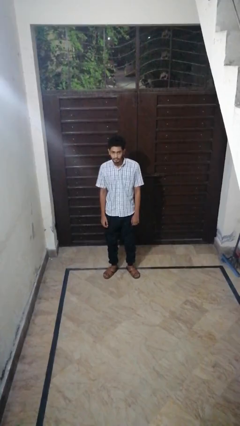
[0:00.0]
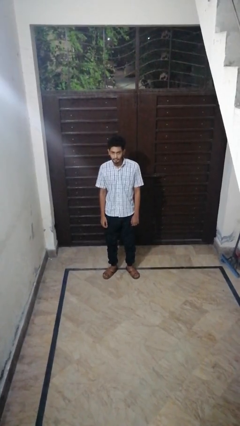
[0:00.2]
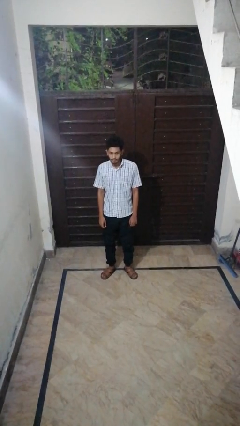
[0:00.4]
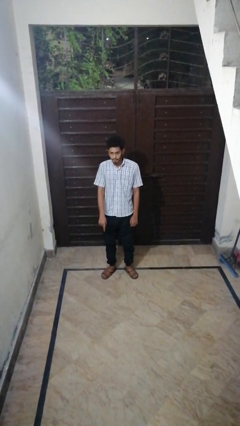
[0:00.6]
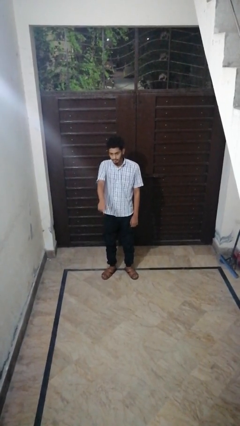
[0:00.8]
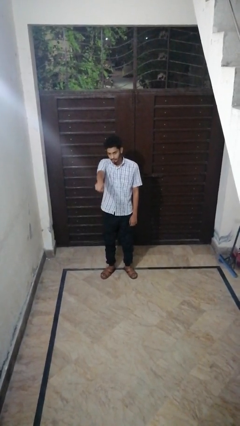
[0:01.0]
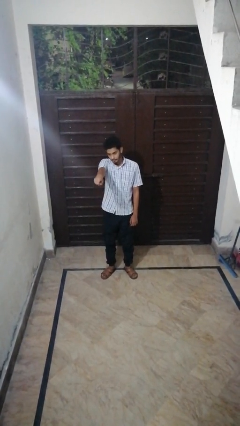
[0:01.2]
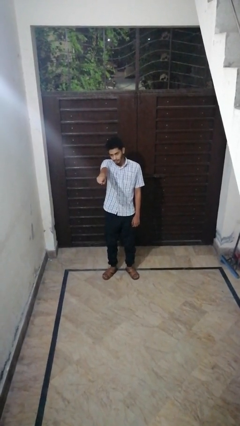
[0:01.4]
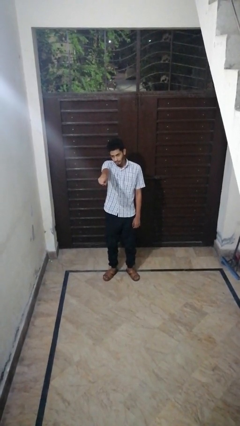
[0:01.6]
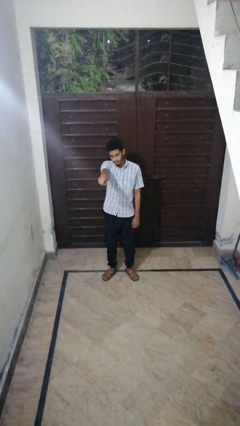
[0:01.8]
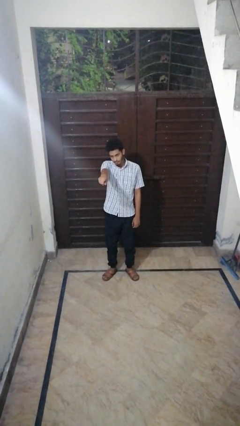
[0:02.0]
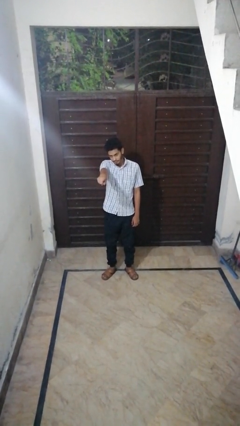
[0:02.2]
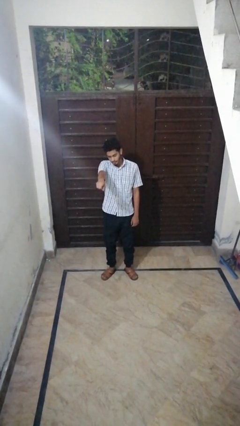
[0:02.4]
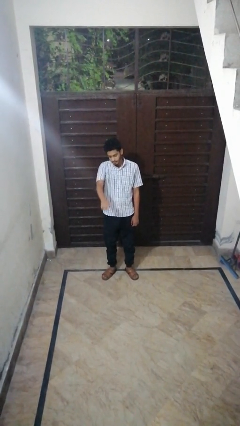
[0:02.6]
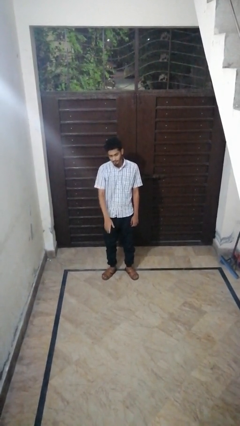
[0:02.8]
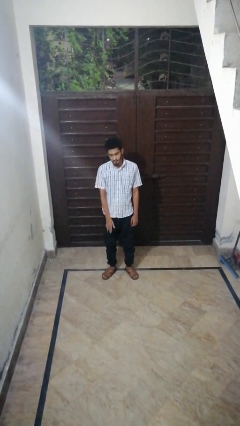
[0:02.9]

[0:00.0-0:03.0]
person points at person

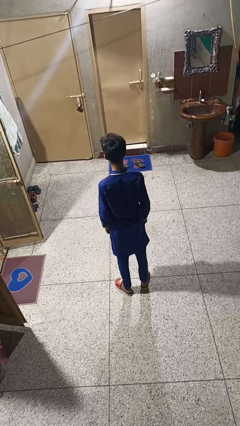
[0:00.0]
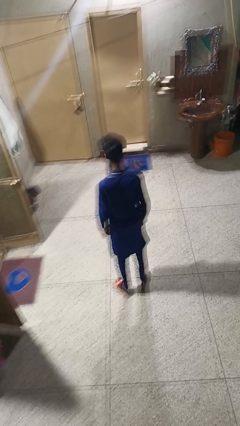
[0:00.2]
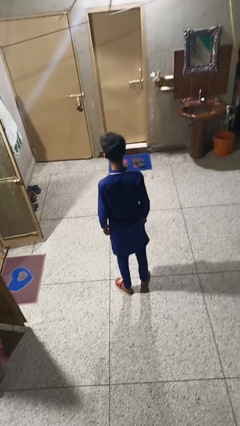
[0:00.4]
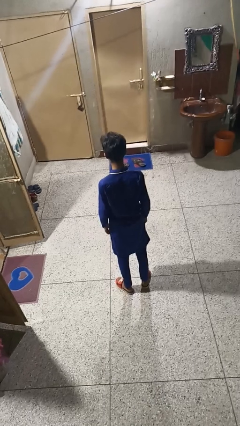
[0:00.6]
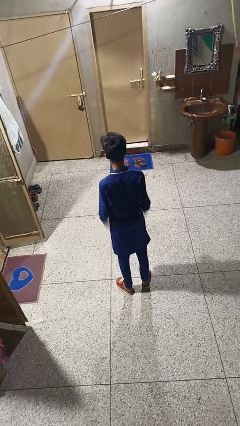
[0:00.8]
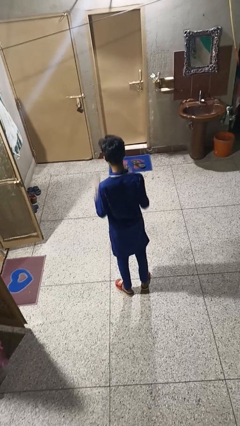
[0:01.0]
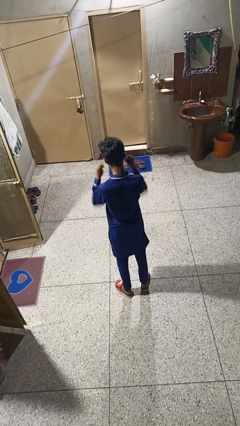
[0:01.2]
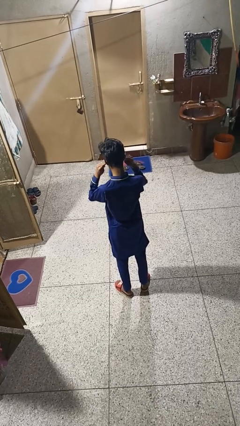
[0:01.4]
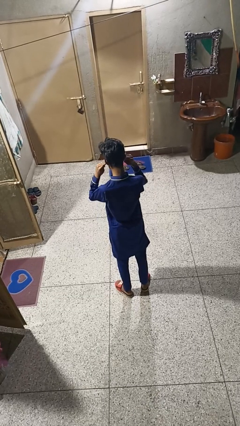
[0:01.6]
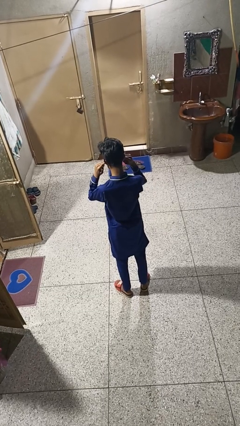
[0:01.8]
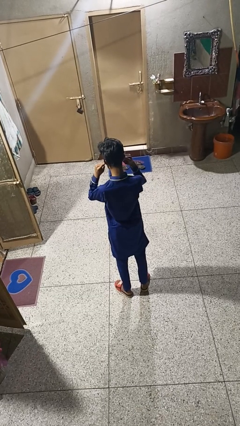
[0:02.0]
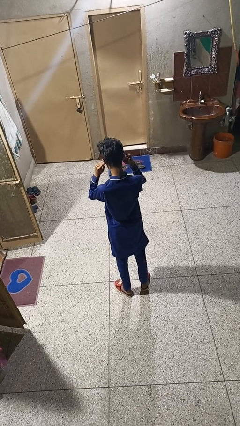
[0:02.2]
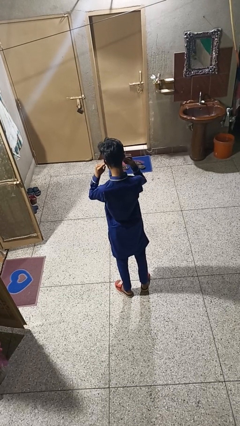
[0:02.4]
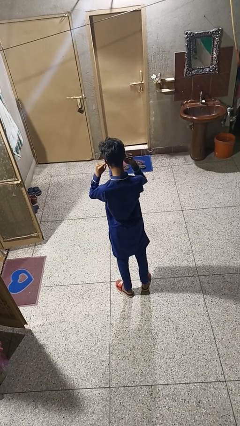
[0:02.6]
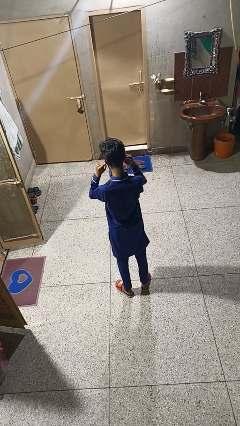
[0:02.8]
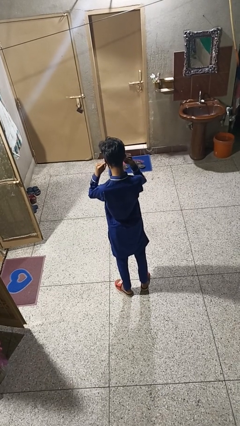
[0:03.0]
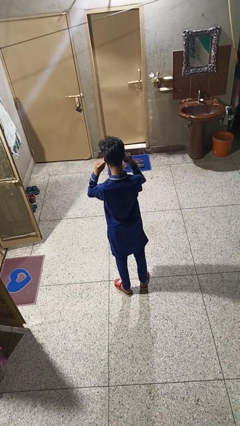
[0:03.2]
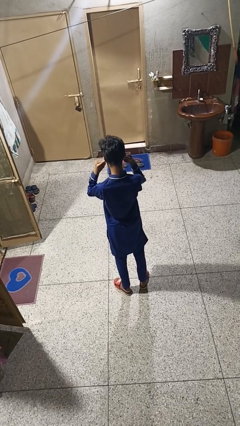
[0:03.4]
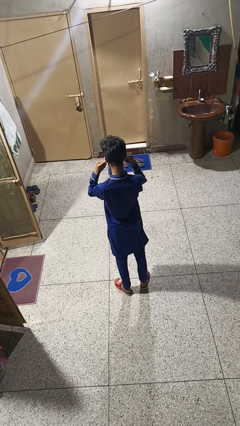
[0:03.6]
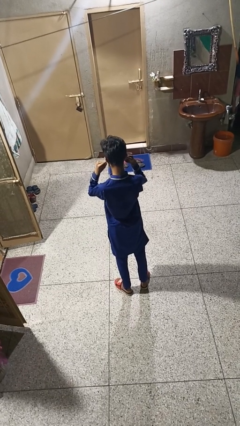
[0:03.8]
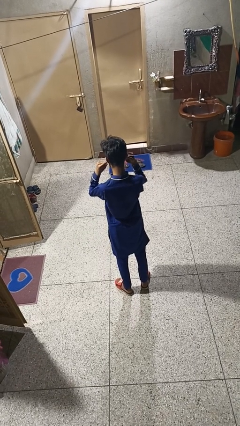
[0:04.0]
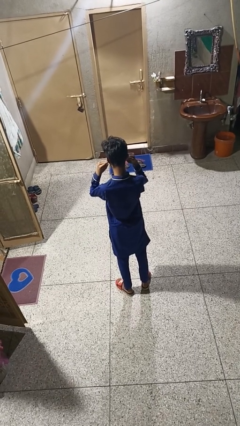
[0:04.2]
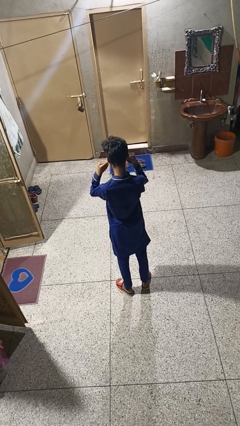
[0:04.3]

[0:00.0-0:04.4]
person puts fingers in ear

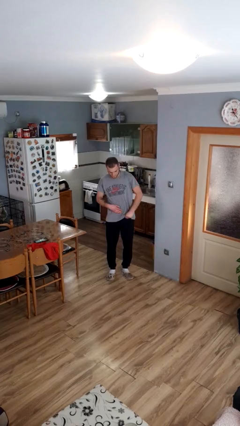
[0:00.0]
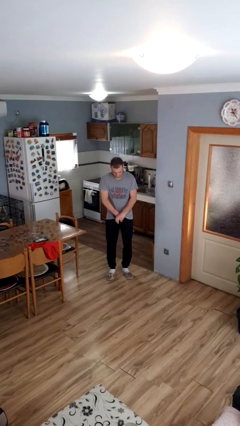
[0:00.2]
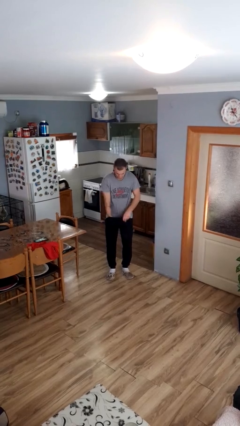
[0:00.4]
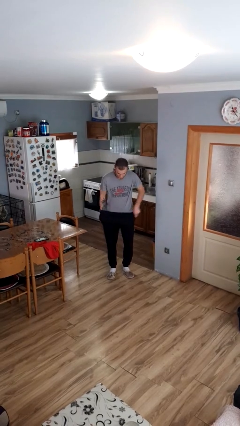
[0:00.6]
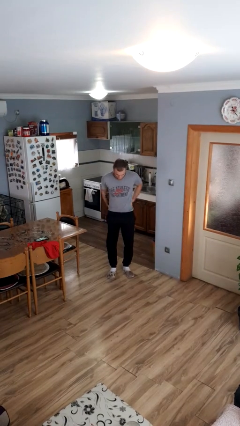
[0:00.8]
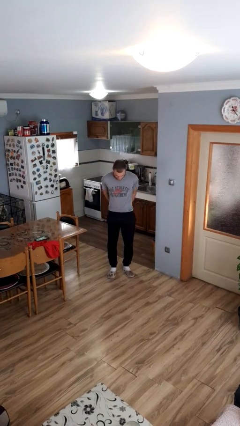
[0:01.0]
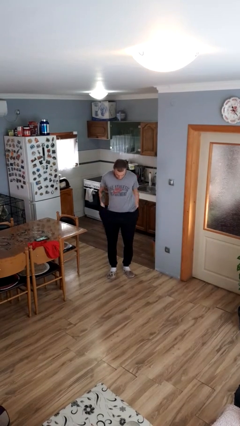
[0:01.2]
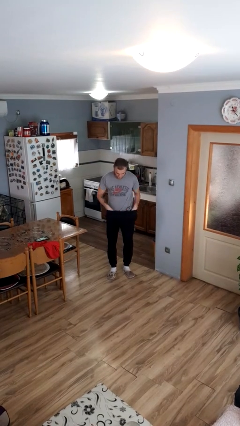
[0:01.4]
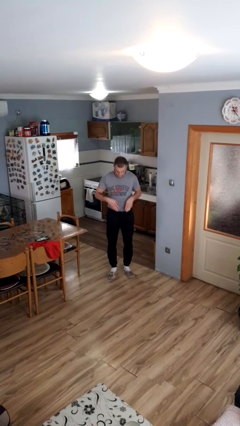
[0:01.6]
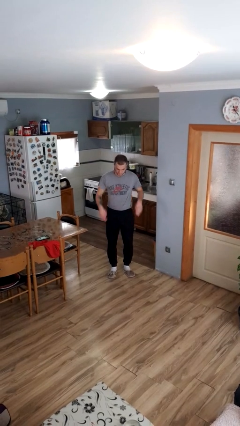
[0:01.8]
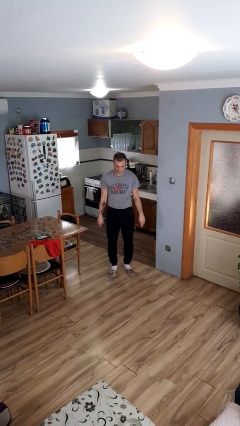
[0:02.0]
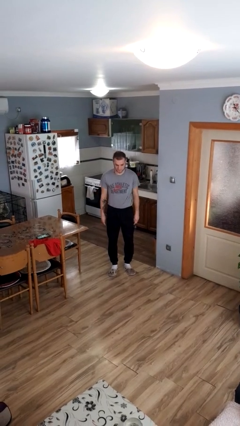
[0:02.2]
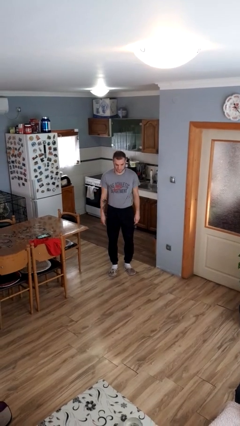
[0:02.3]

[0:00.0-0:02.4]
person tucks in shirt

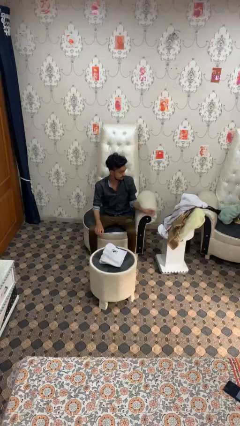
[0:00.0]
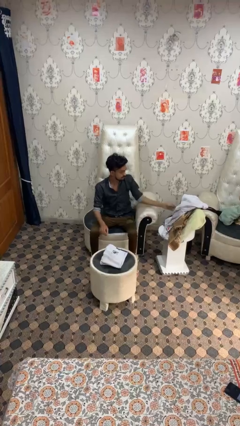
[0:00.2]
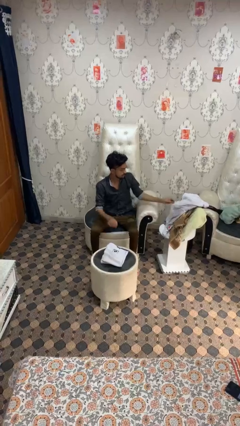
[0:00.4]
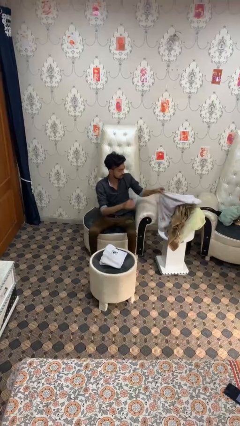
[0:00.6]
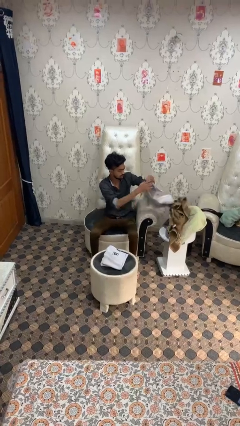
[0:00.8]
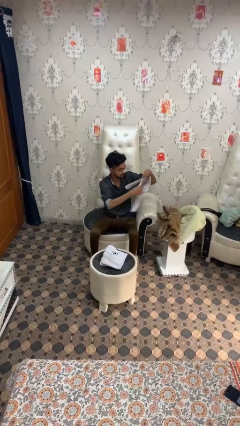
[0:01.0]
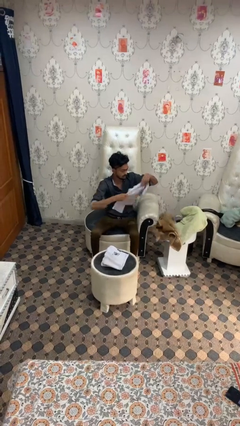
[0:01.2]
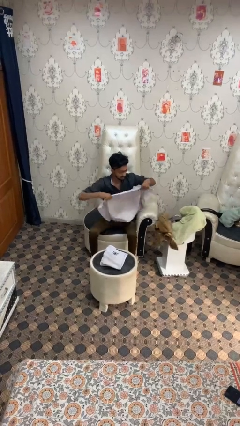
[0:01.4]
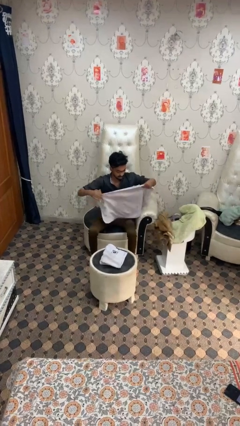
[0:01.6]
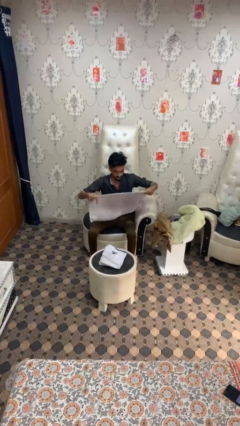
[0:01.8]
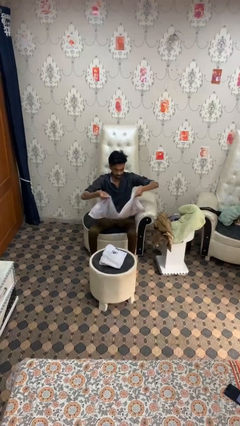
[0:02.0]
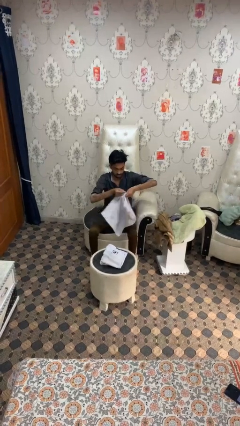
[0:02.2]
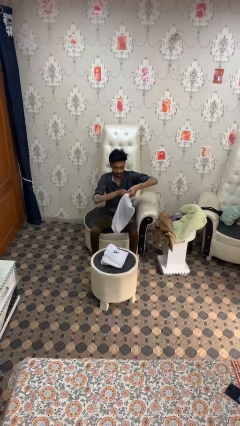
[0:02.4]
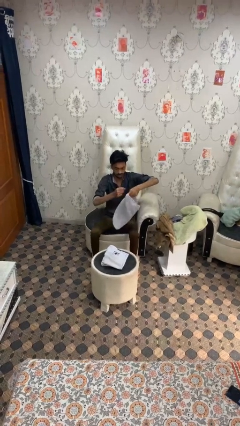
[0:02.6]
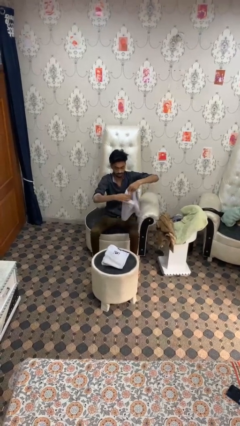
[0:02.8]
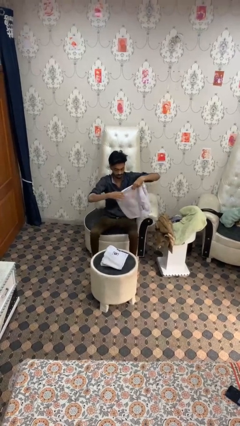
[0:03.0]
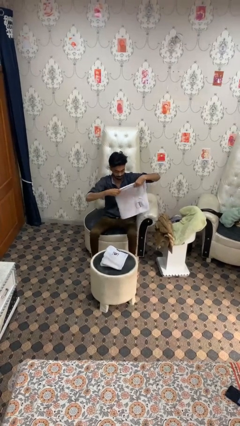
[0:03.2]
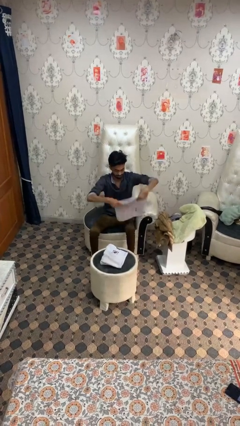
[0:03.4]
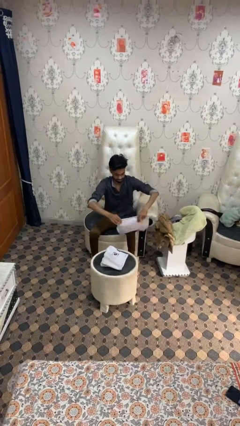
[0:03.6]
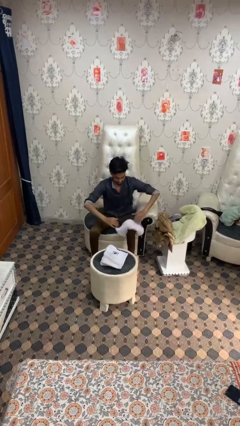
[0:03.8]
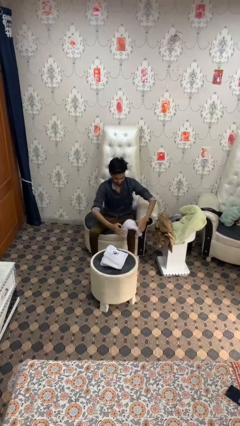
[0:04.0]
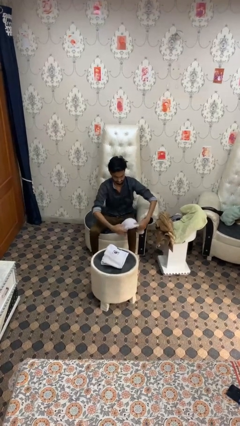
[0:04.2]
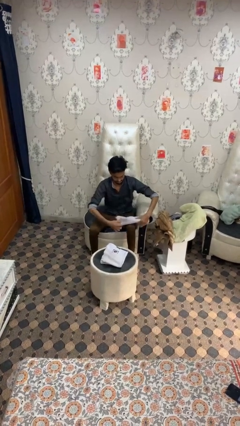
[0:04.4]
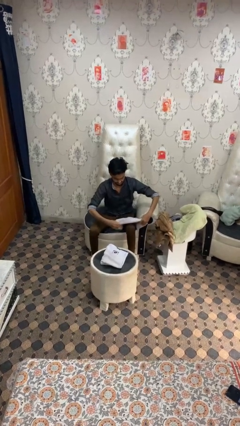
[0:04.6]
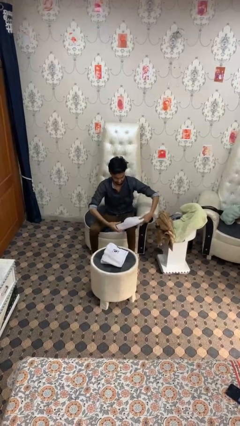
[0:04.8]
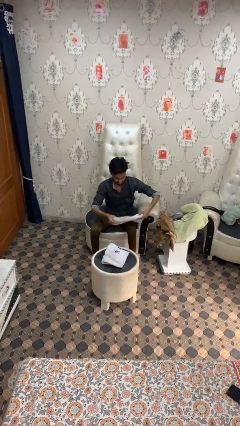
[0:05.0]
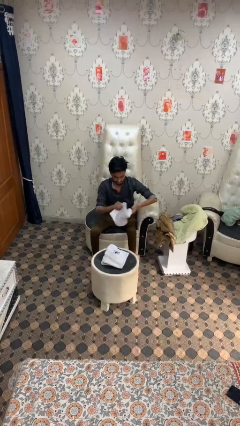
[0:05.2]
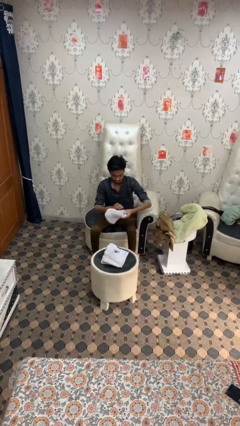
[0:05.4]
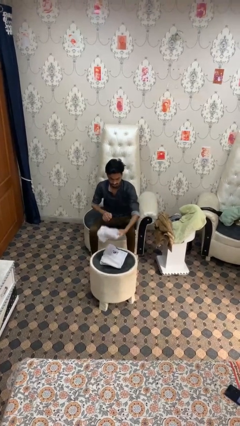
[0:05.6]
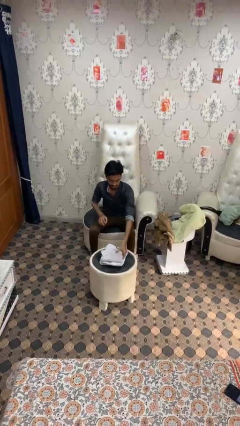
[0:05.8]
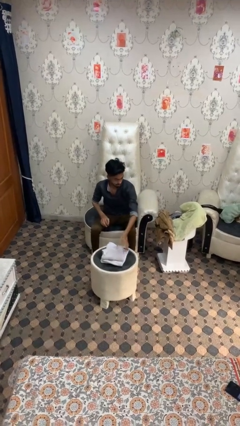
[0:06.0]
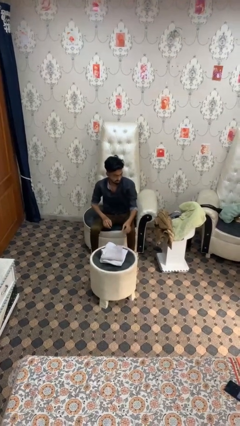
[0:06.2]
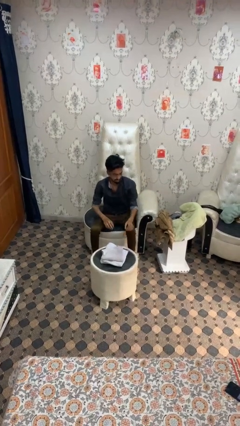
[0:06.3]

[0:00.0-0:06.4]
person folds towel

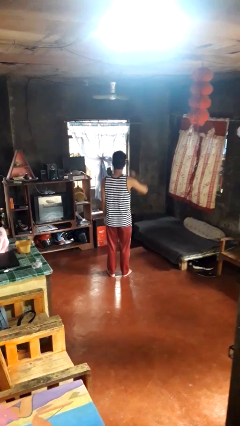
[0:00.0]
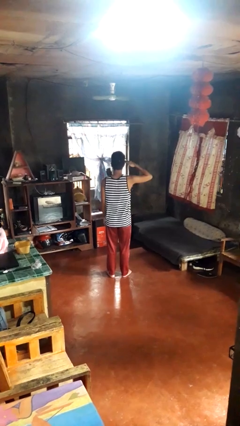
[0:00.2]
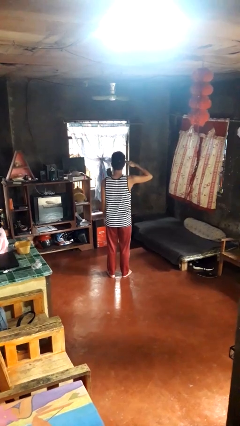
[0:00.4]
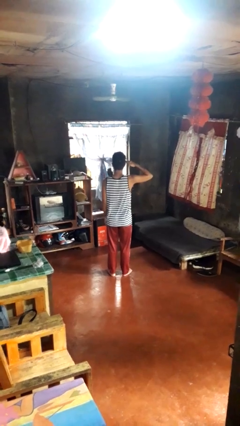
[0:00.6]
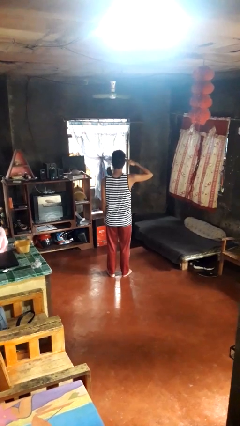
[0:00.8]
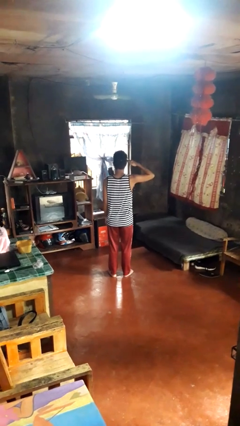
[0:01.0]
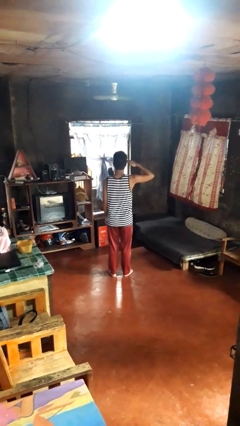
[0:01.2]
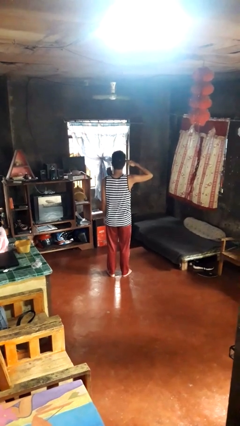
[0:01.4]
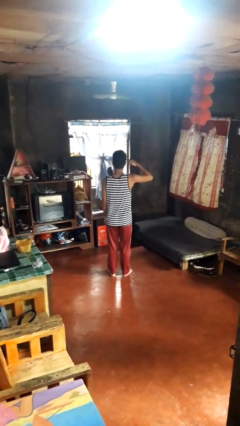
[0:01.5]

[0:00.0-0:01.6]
person salutes
